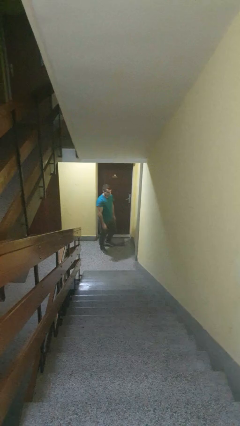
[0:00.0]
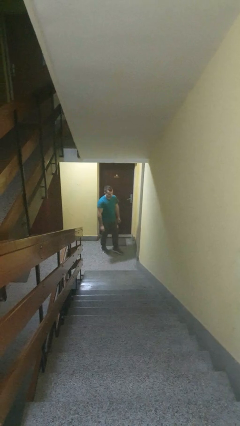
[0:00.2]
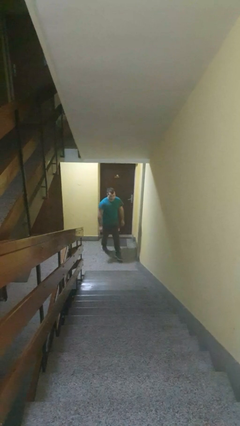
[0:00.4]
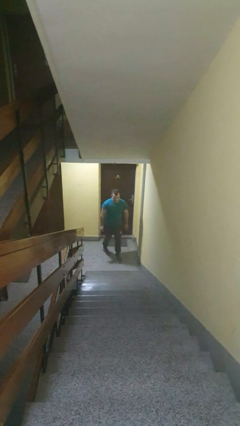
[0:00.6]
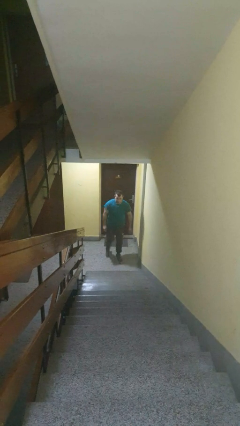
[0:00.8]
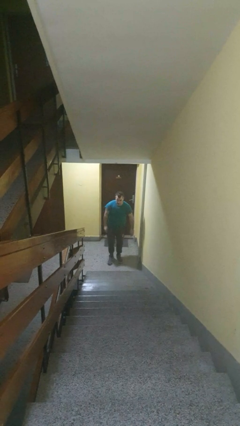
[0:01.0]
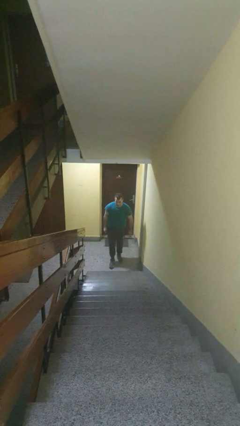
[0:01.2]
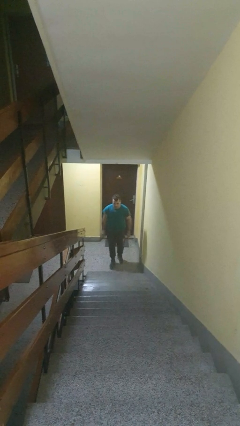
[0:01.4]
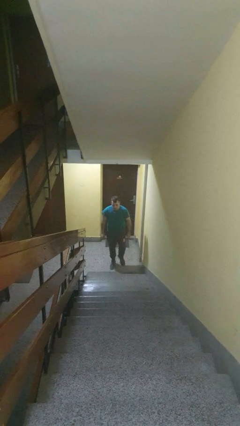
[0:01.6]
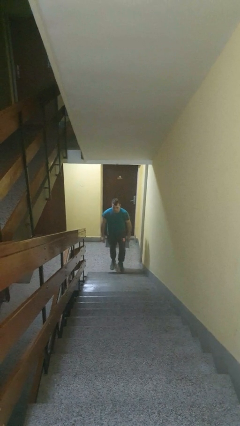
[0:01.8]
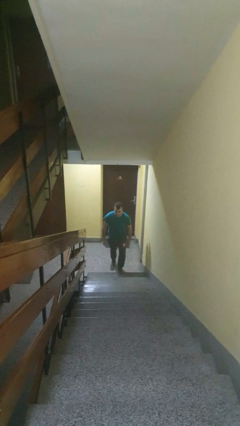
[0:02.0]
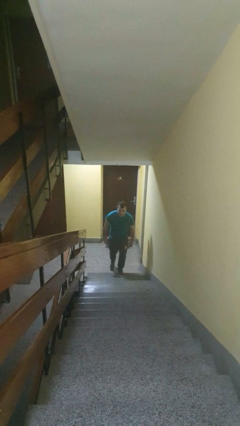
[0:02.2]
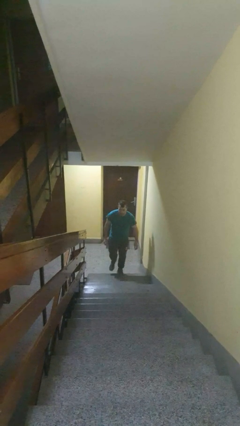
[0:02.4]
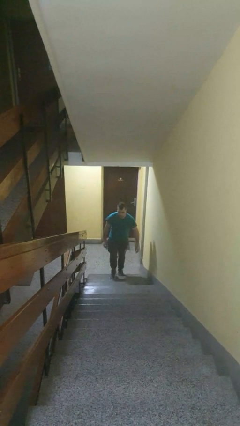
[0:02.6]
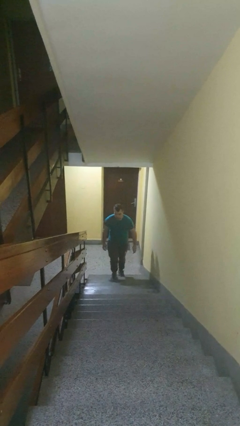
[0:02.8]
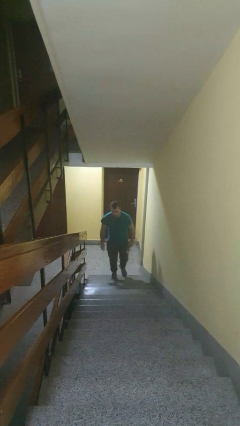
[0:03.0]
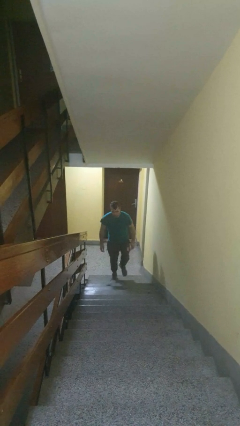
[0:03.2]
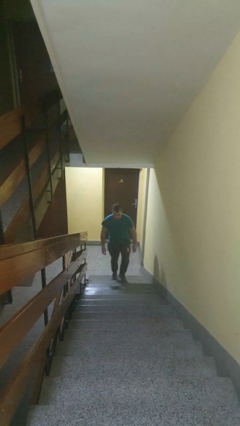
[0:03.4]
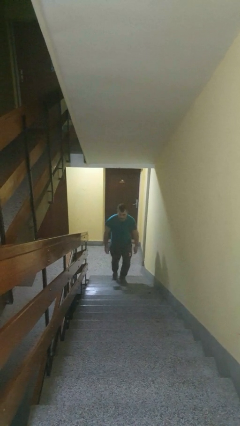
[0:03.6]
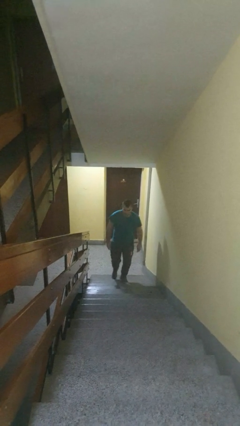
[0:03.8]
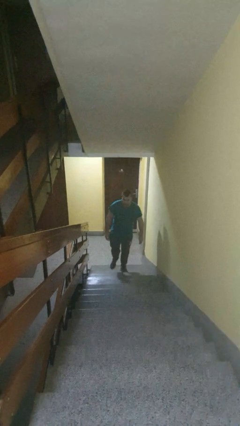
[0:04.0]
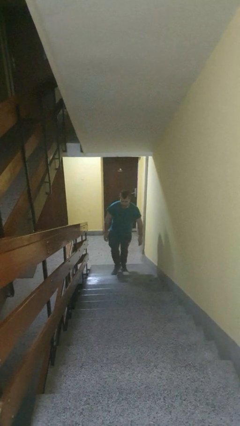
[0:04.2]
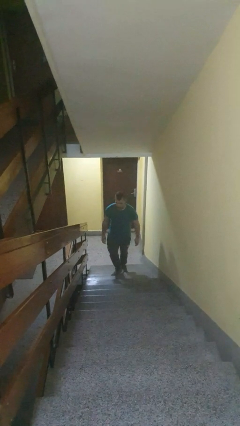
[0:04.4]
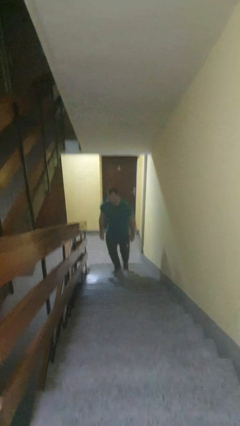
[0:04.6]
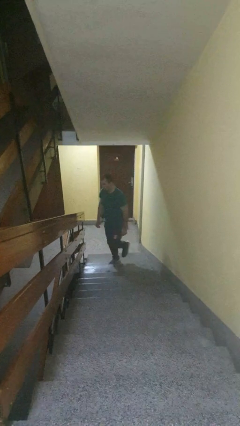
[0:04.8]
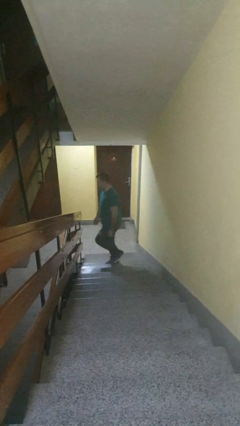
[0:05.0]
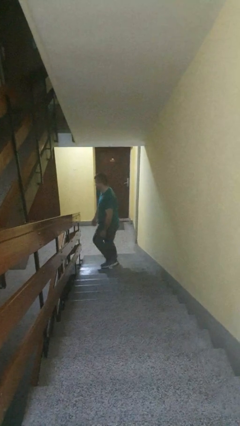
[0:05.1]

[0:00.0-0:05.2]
person climbs up stairs

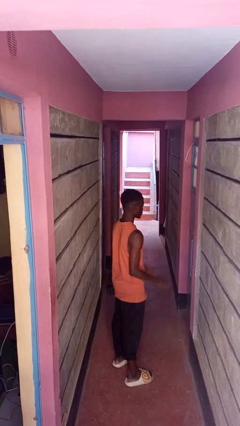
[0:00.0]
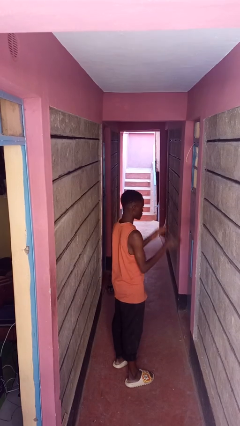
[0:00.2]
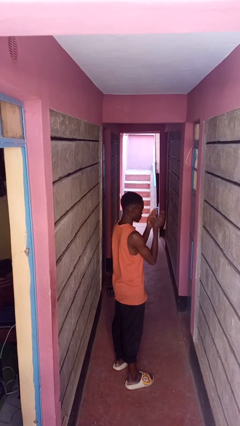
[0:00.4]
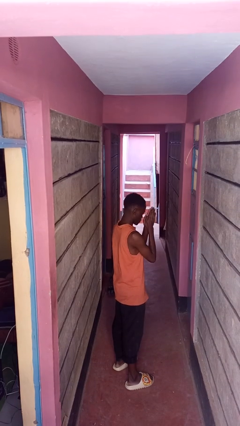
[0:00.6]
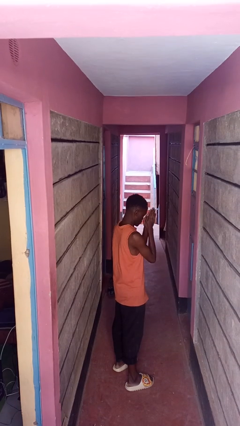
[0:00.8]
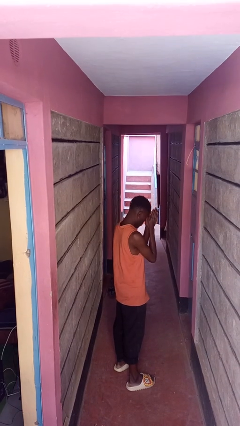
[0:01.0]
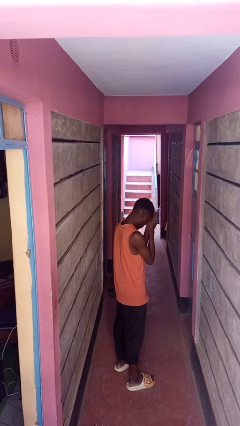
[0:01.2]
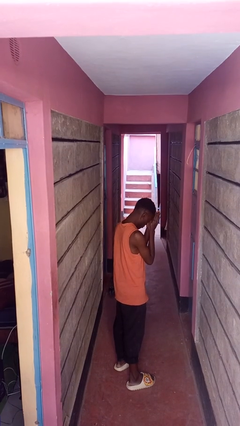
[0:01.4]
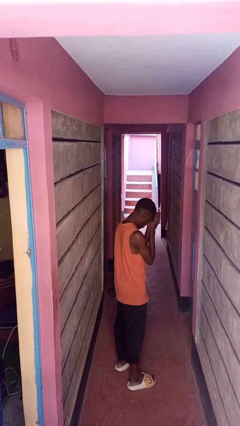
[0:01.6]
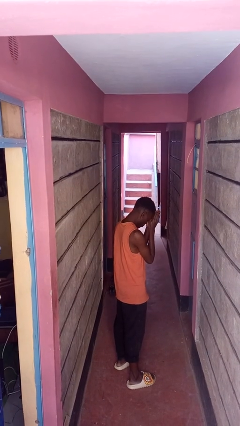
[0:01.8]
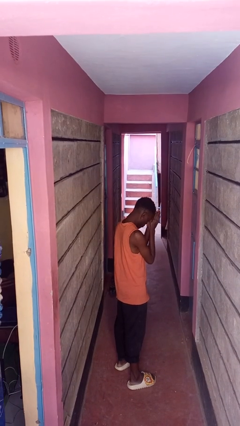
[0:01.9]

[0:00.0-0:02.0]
person prays

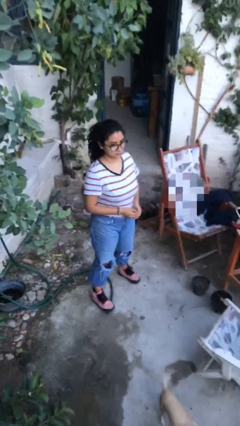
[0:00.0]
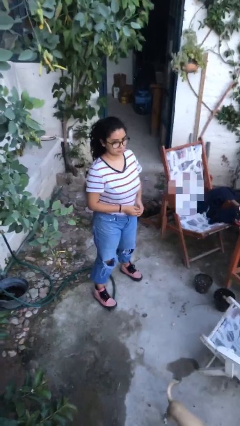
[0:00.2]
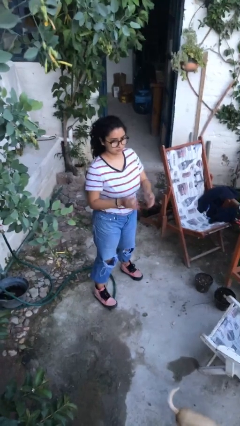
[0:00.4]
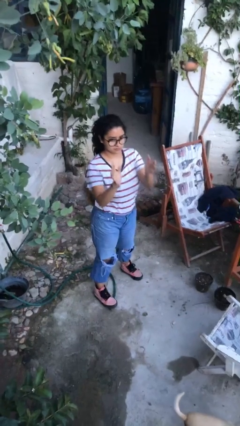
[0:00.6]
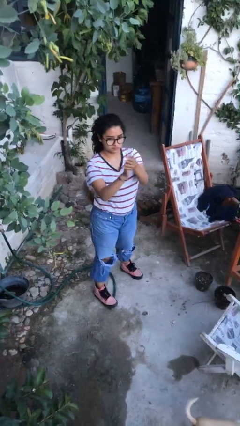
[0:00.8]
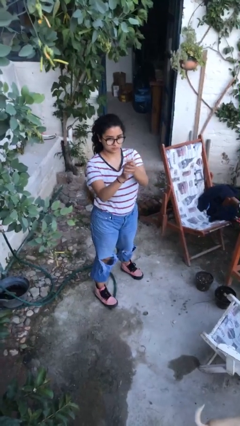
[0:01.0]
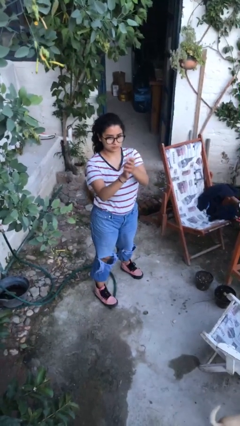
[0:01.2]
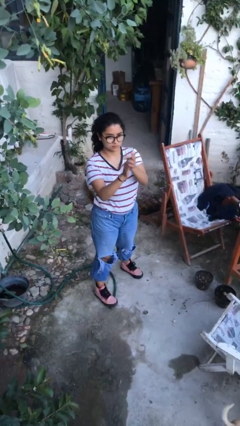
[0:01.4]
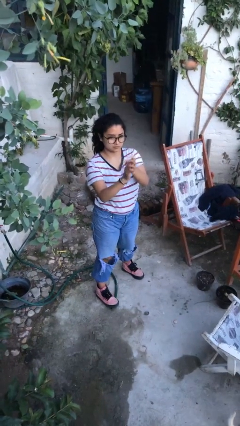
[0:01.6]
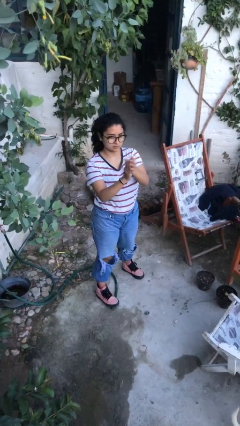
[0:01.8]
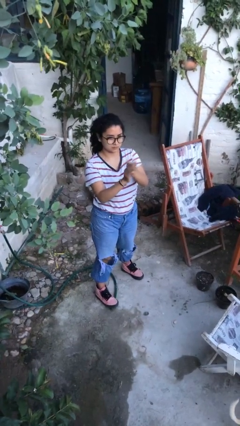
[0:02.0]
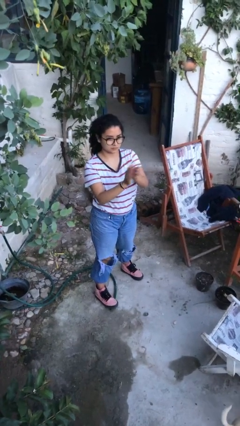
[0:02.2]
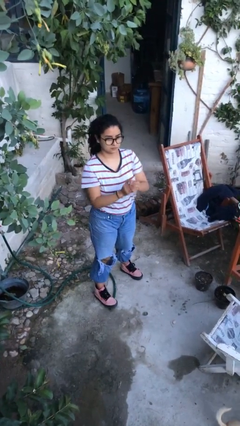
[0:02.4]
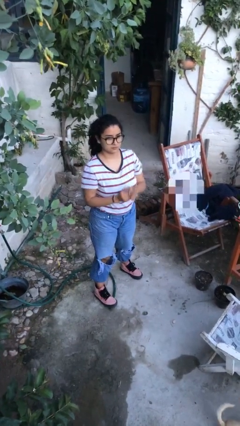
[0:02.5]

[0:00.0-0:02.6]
person claps hands

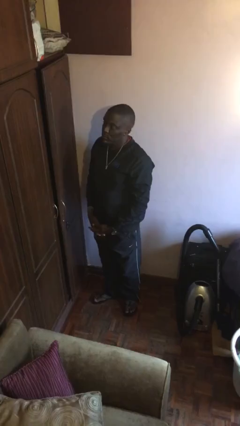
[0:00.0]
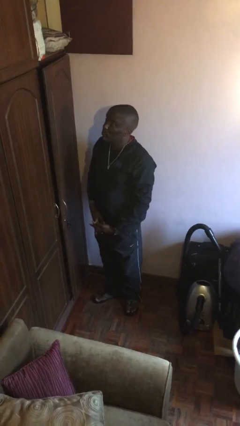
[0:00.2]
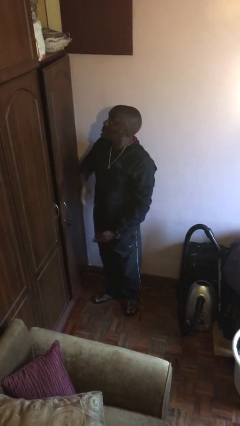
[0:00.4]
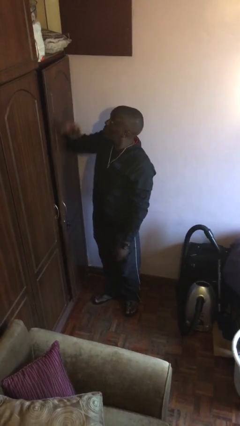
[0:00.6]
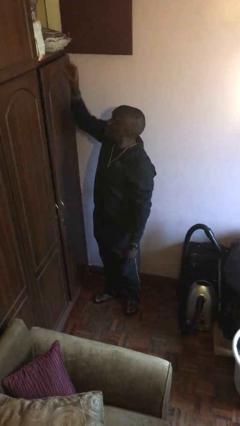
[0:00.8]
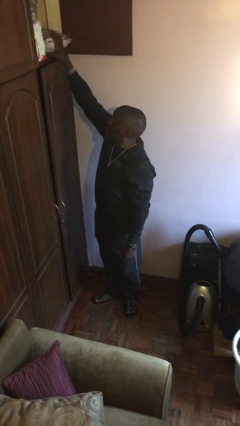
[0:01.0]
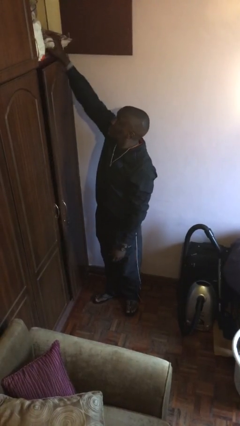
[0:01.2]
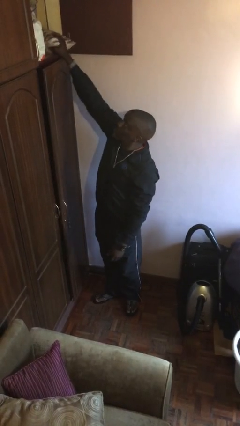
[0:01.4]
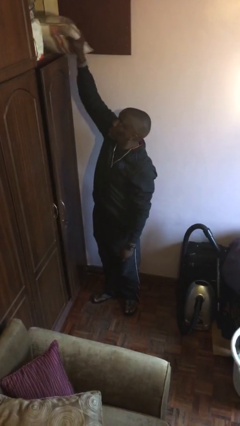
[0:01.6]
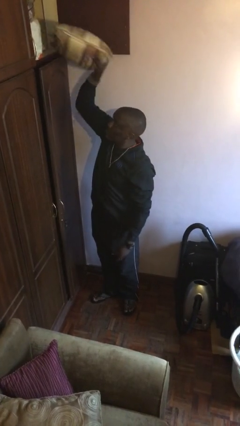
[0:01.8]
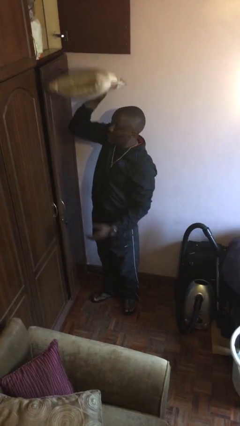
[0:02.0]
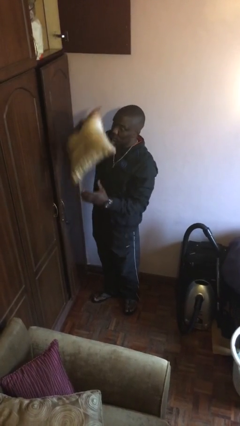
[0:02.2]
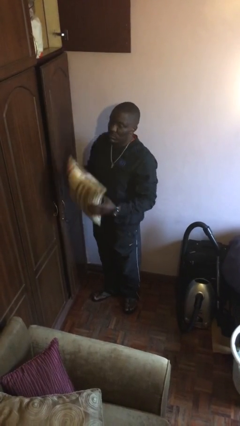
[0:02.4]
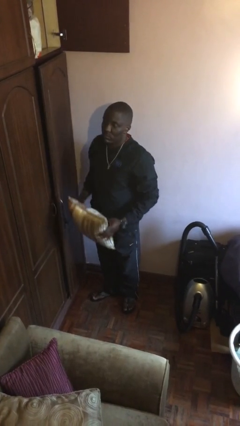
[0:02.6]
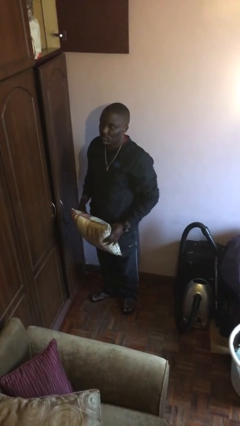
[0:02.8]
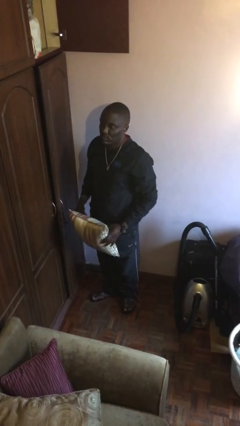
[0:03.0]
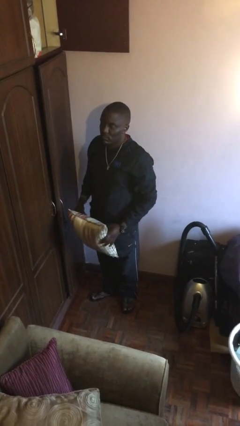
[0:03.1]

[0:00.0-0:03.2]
person picks up object from shelf

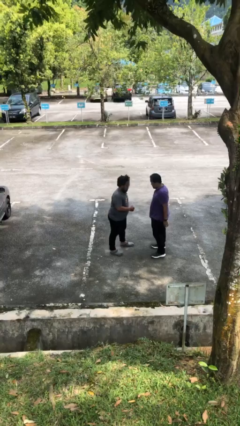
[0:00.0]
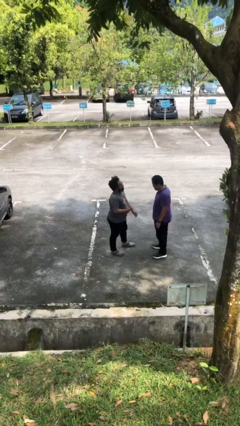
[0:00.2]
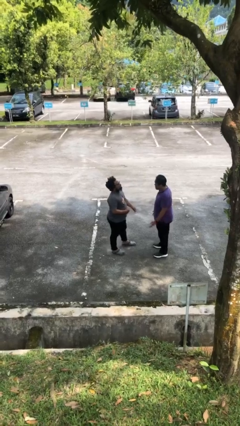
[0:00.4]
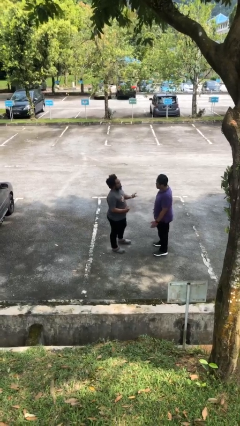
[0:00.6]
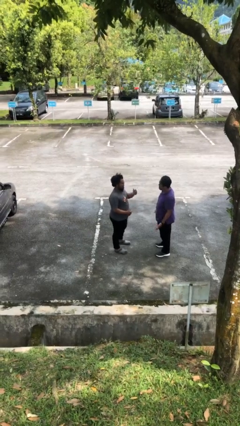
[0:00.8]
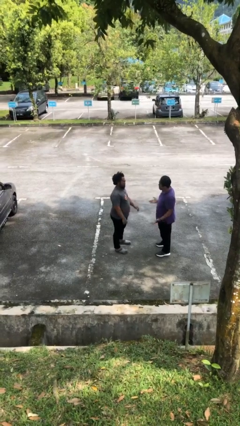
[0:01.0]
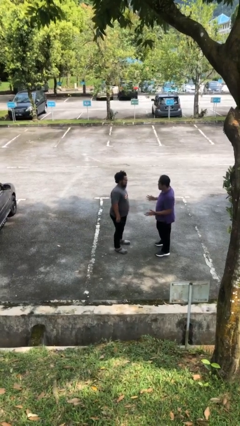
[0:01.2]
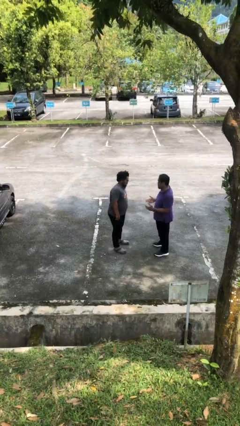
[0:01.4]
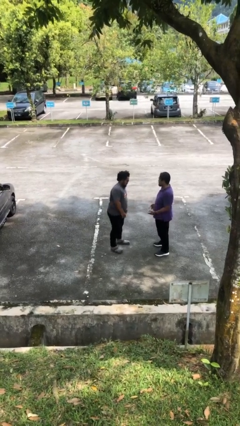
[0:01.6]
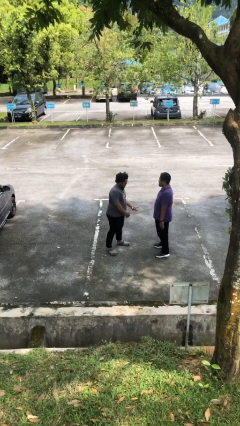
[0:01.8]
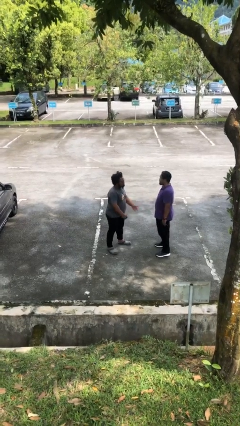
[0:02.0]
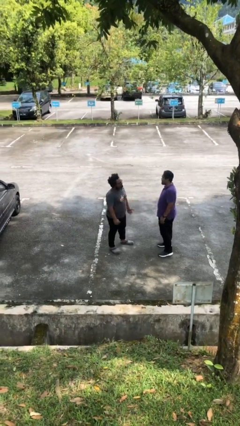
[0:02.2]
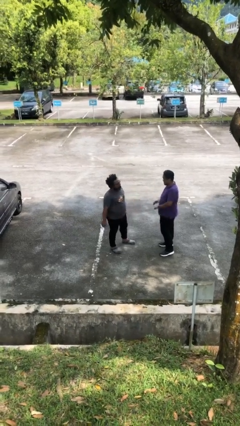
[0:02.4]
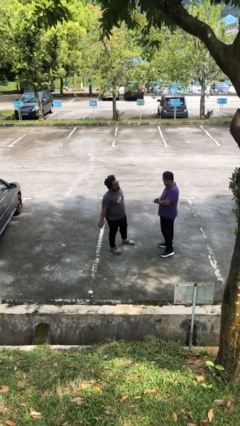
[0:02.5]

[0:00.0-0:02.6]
person talks to person

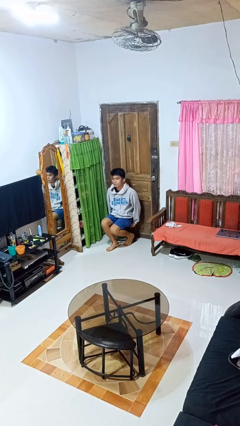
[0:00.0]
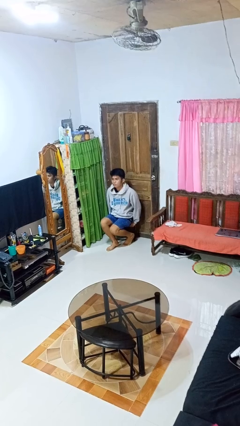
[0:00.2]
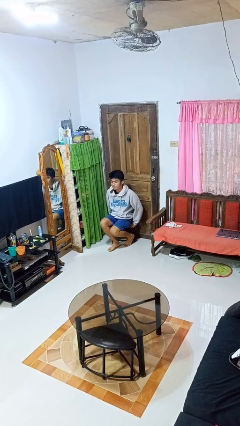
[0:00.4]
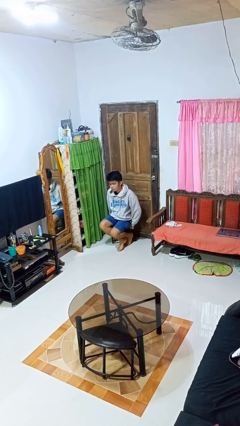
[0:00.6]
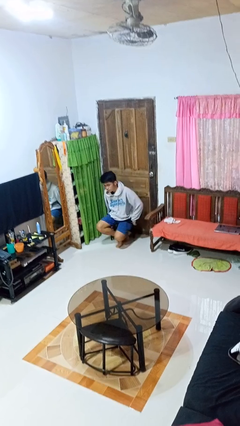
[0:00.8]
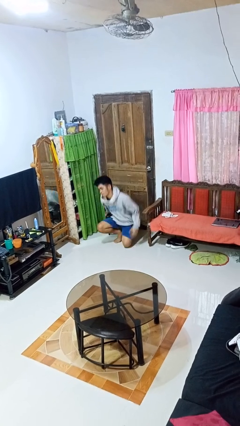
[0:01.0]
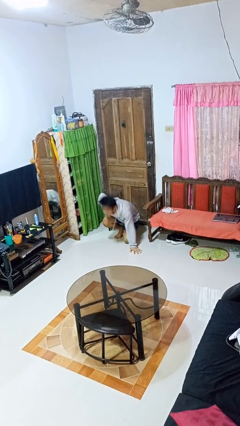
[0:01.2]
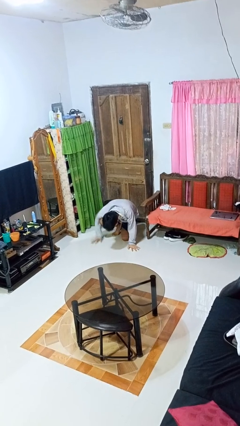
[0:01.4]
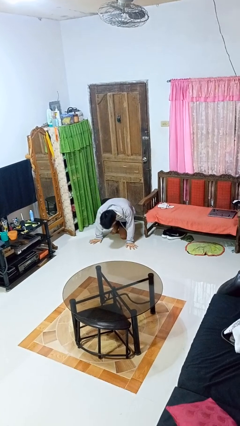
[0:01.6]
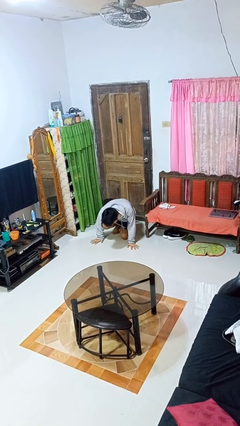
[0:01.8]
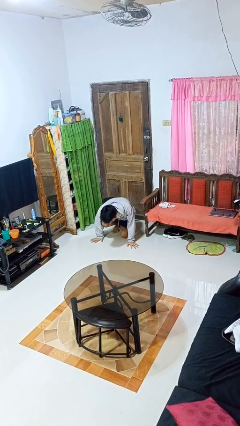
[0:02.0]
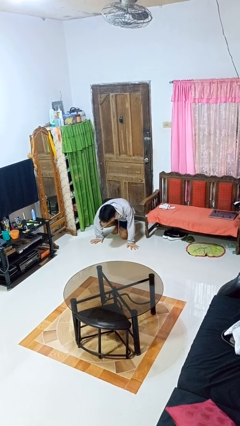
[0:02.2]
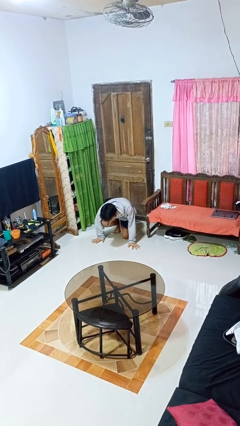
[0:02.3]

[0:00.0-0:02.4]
person falls from chair
